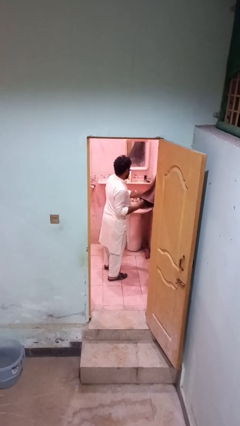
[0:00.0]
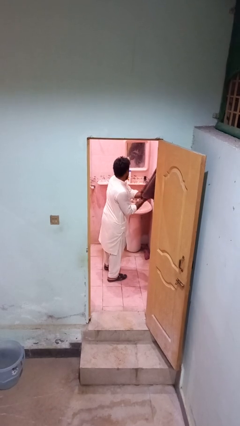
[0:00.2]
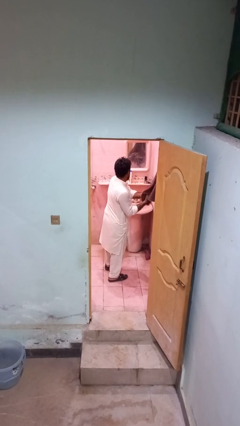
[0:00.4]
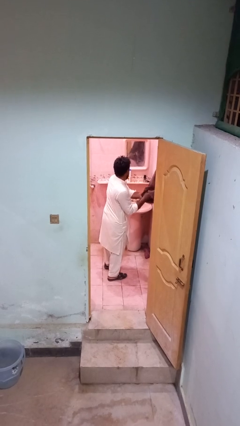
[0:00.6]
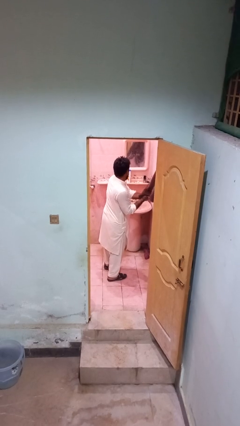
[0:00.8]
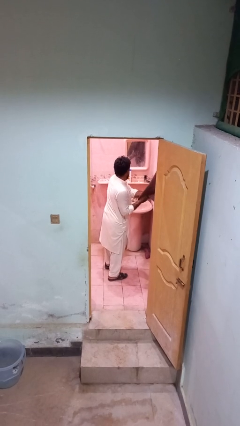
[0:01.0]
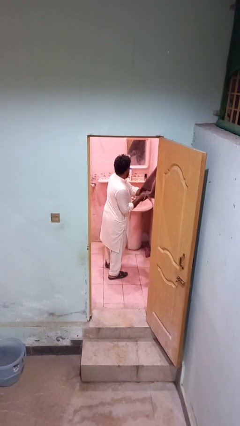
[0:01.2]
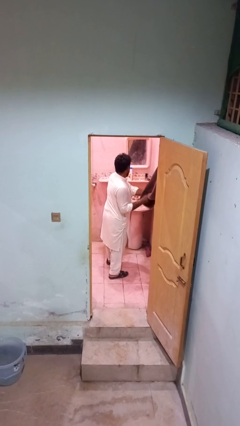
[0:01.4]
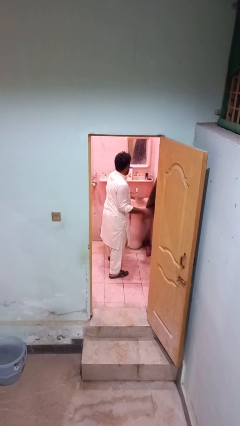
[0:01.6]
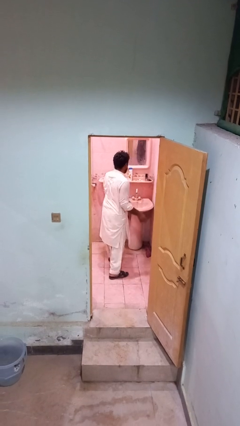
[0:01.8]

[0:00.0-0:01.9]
person dries hands with towel

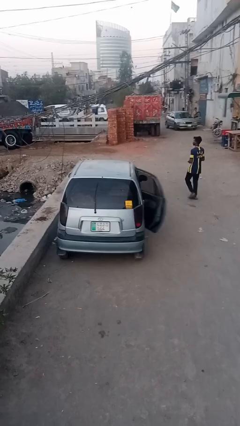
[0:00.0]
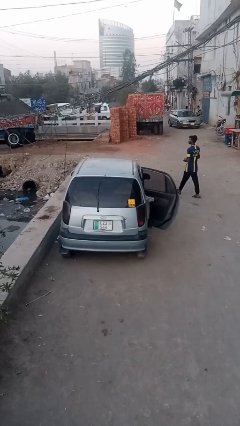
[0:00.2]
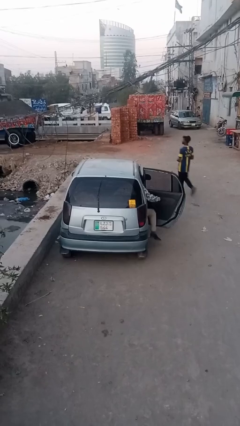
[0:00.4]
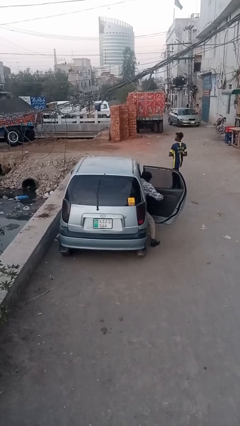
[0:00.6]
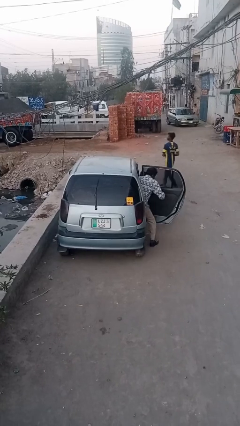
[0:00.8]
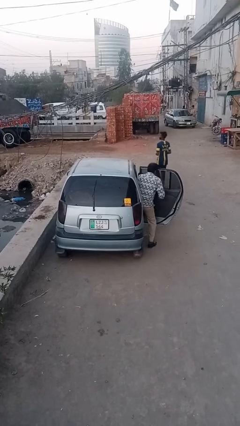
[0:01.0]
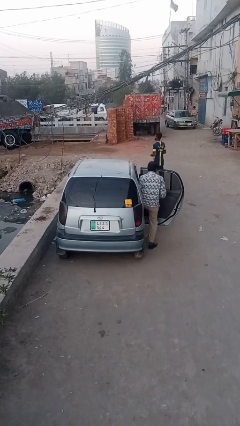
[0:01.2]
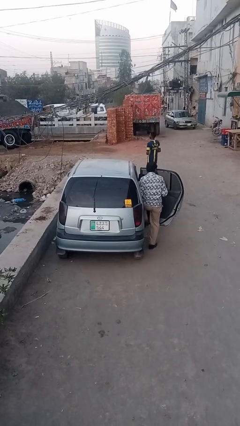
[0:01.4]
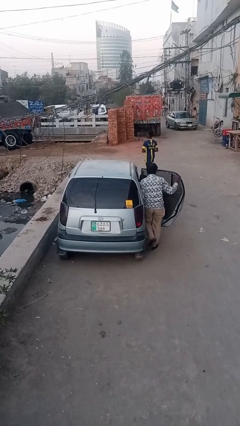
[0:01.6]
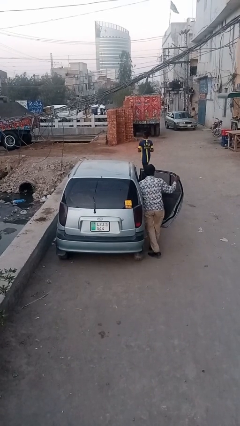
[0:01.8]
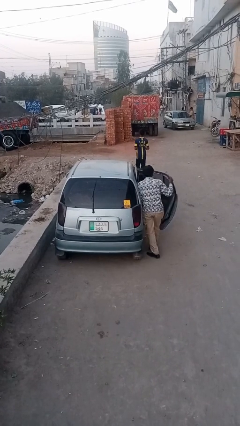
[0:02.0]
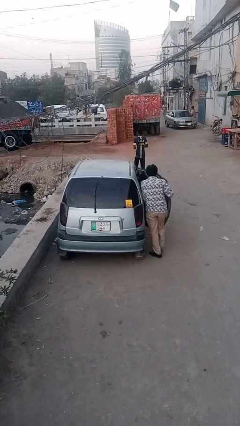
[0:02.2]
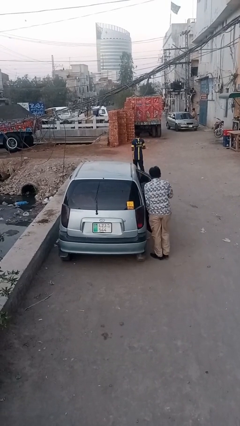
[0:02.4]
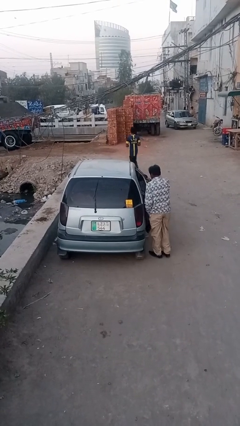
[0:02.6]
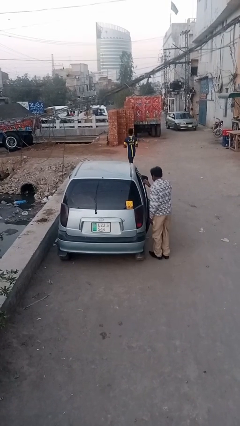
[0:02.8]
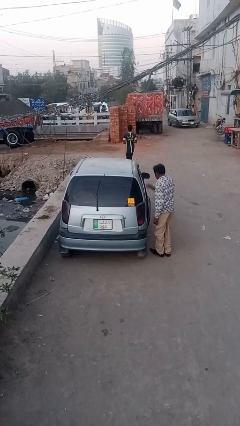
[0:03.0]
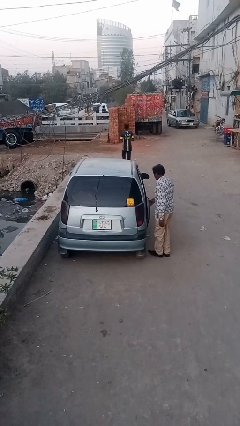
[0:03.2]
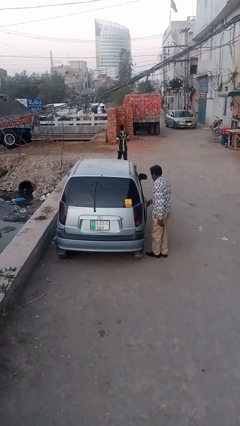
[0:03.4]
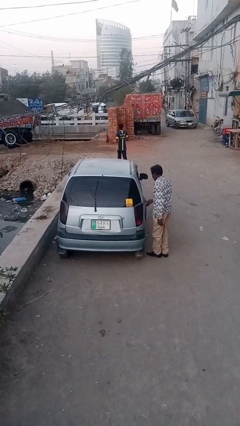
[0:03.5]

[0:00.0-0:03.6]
car drops off person

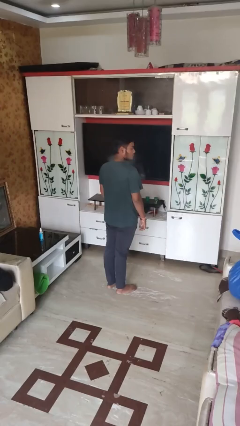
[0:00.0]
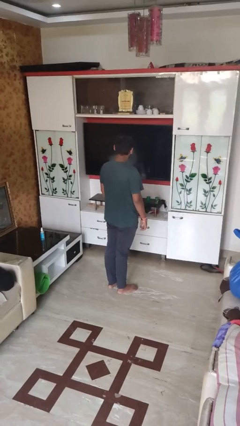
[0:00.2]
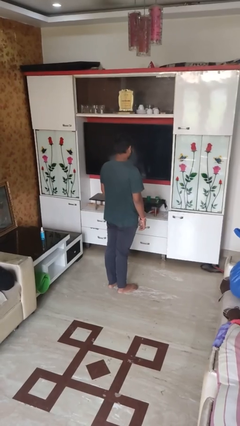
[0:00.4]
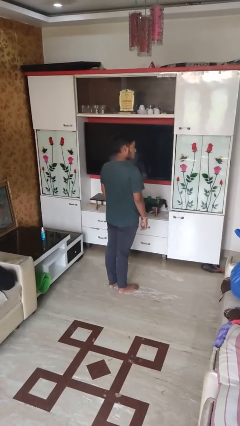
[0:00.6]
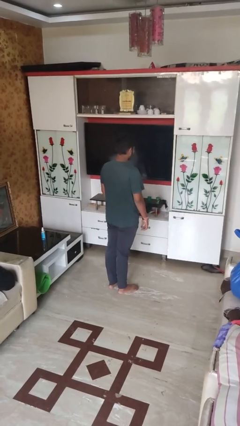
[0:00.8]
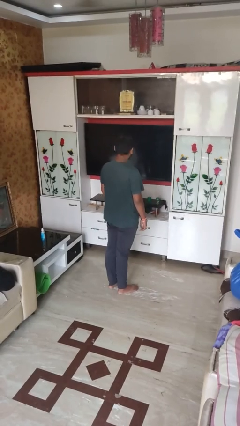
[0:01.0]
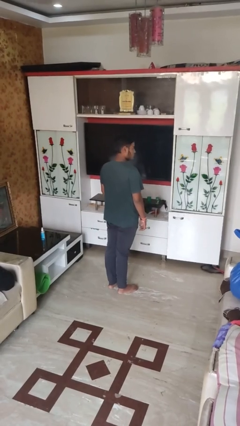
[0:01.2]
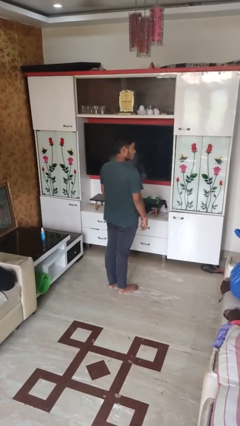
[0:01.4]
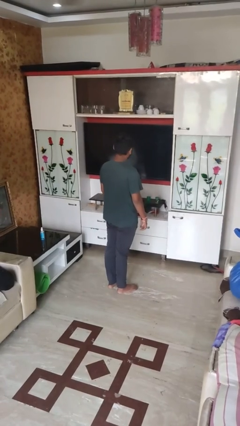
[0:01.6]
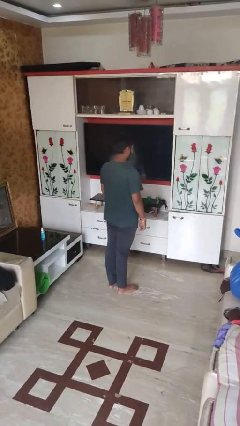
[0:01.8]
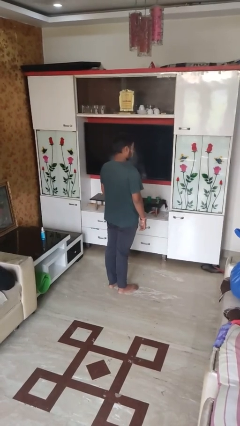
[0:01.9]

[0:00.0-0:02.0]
person shakes head

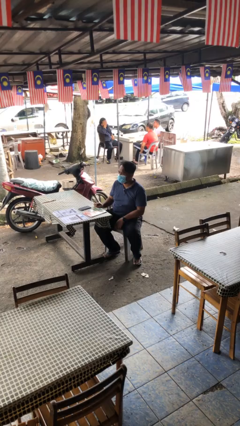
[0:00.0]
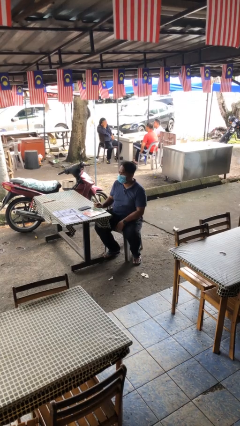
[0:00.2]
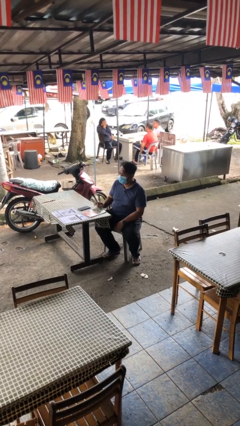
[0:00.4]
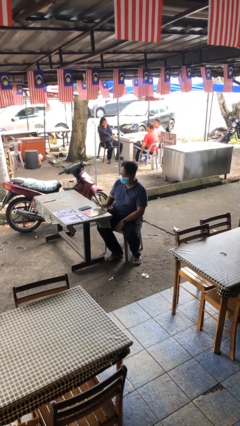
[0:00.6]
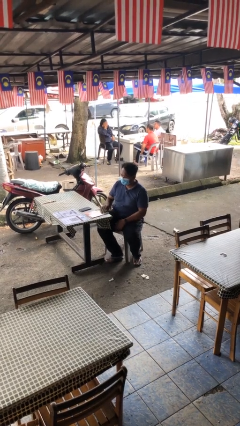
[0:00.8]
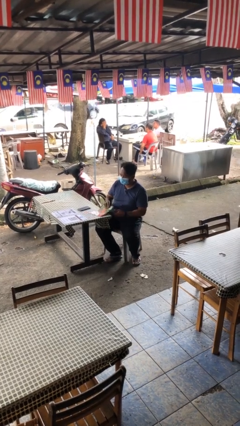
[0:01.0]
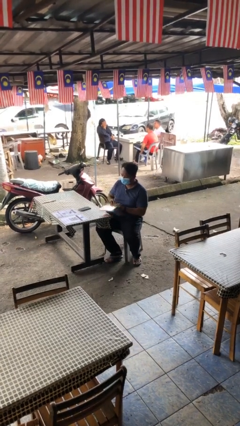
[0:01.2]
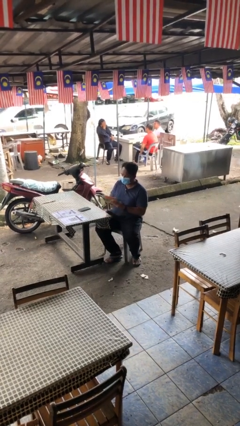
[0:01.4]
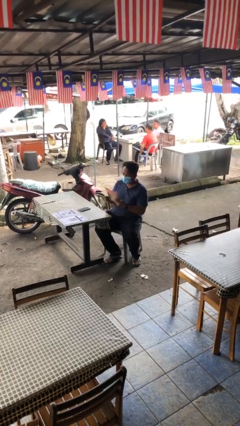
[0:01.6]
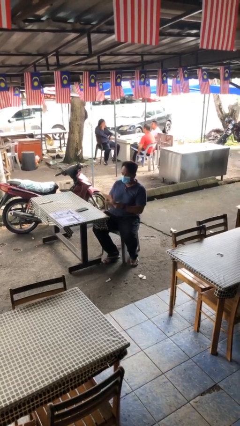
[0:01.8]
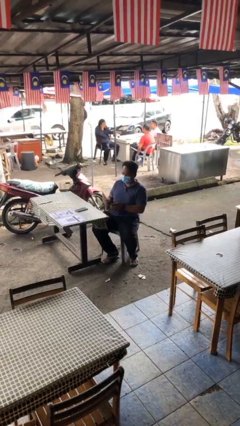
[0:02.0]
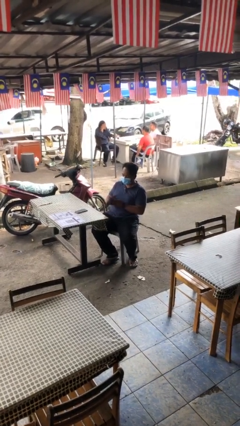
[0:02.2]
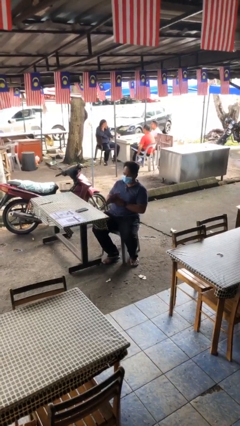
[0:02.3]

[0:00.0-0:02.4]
person picks up object from table

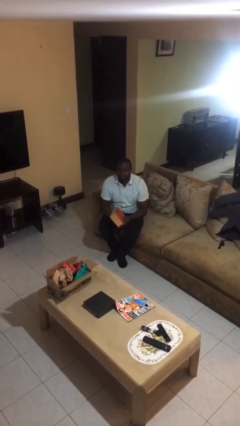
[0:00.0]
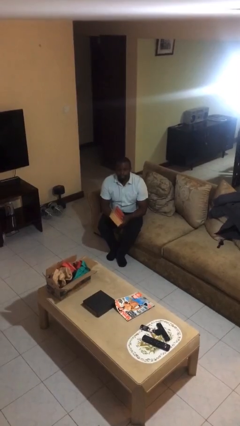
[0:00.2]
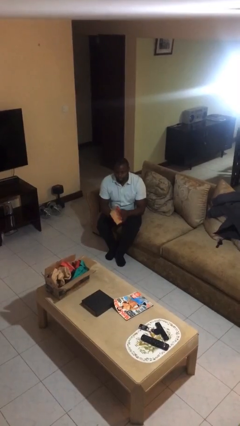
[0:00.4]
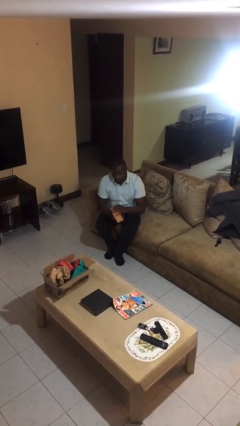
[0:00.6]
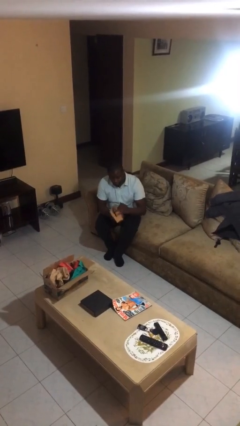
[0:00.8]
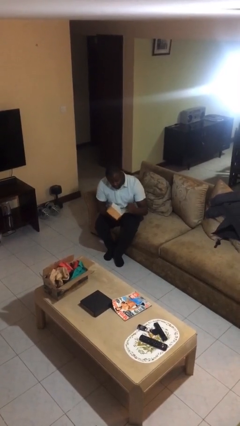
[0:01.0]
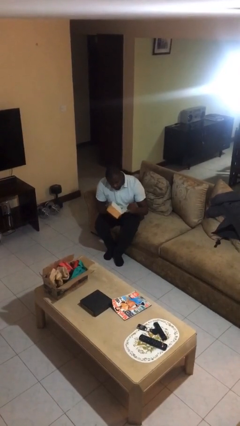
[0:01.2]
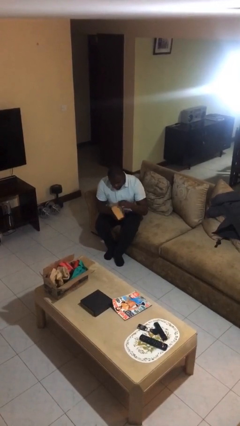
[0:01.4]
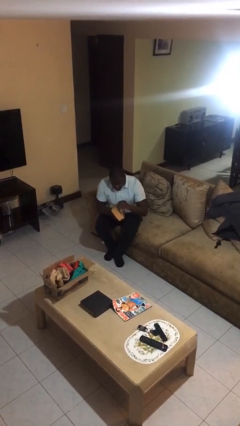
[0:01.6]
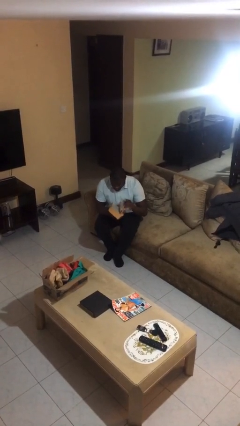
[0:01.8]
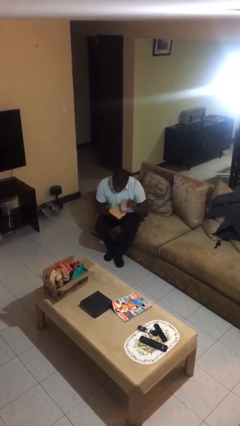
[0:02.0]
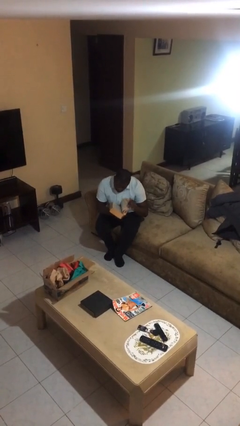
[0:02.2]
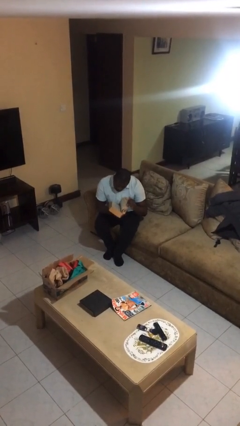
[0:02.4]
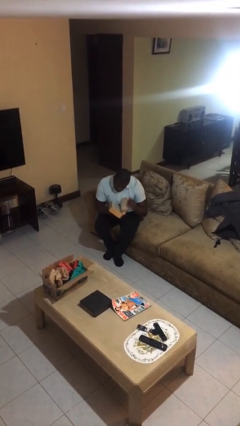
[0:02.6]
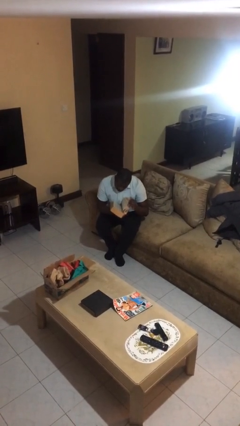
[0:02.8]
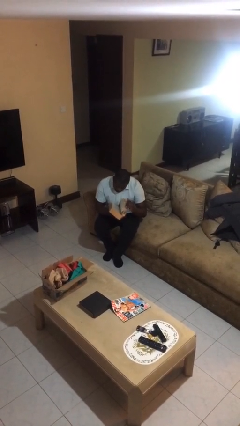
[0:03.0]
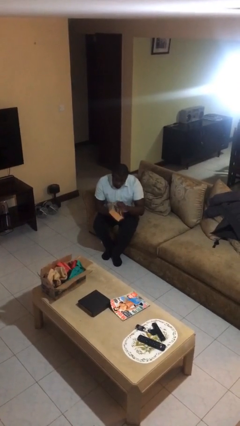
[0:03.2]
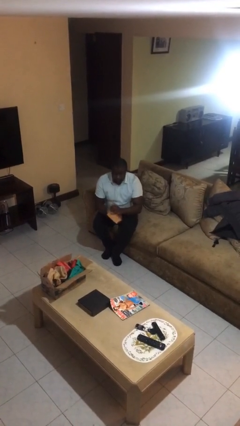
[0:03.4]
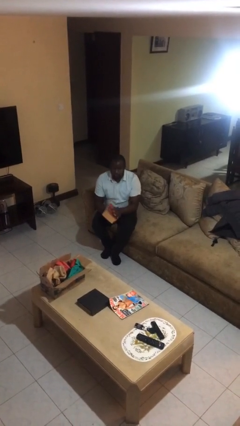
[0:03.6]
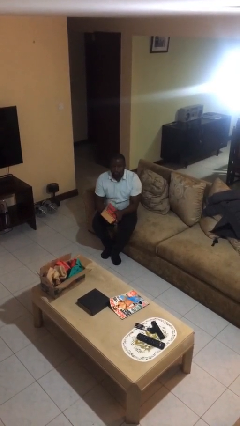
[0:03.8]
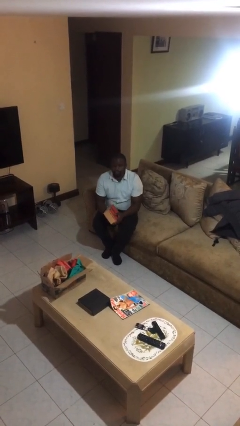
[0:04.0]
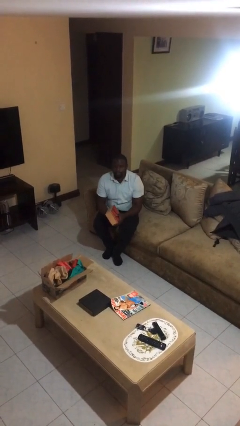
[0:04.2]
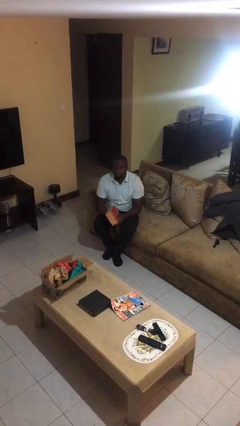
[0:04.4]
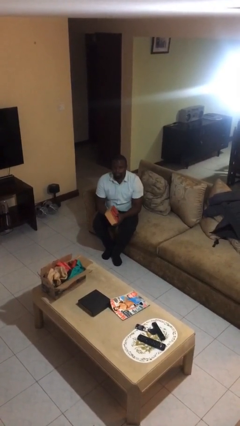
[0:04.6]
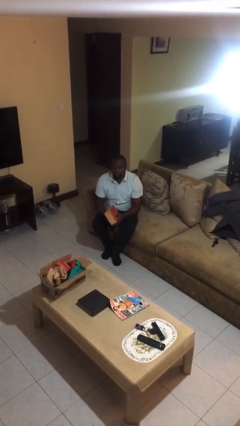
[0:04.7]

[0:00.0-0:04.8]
person reads book

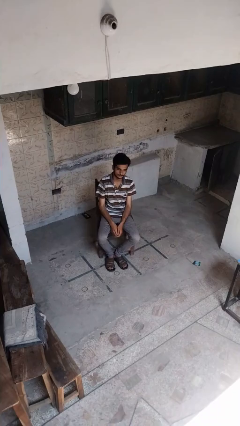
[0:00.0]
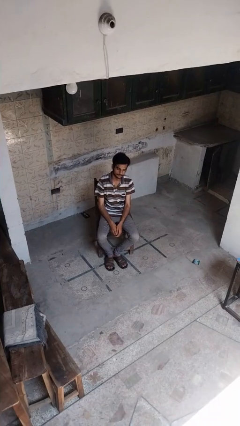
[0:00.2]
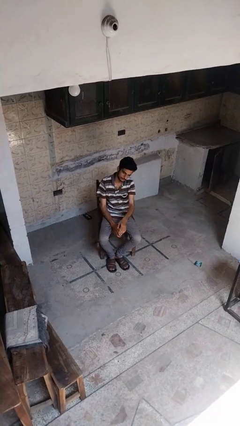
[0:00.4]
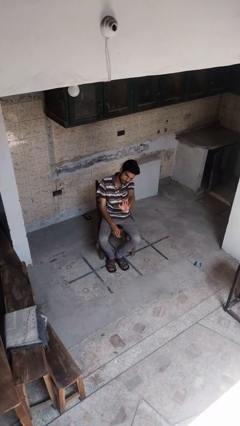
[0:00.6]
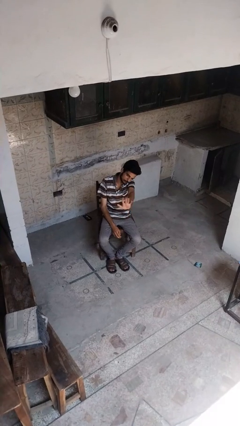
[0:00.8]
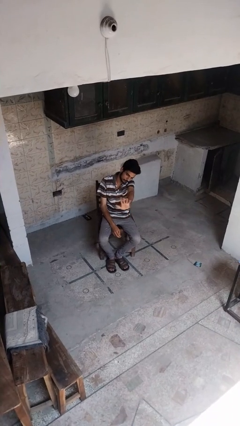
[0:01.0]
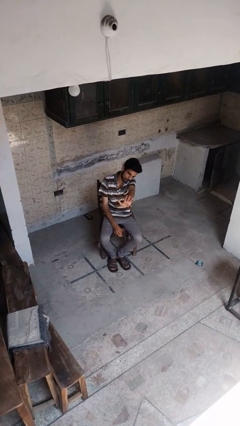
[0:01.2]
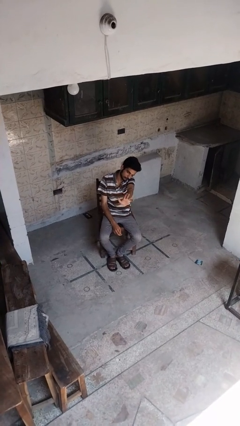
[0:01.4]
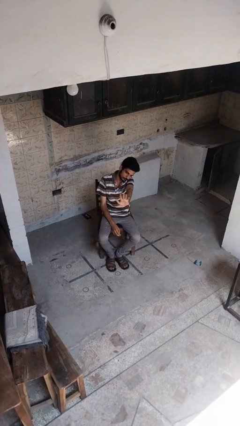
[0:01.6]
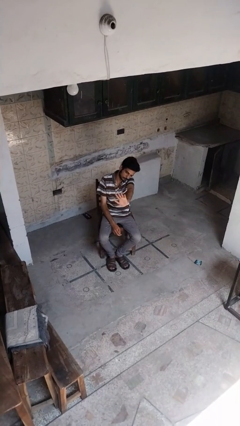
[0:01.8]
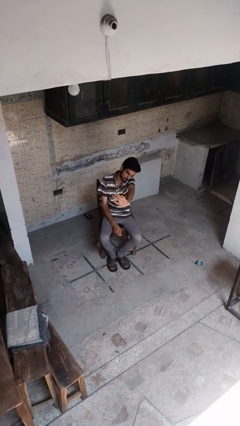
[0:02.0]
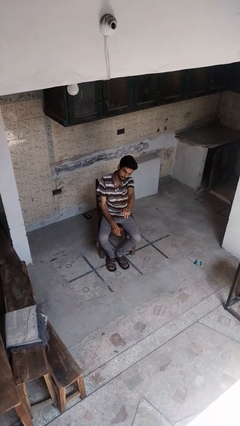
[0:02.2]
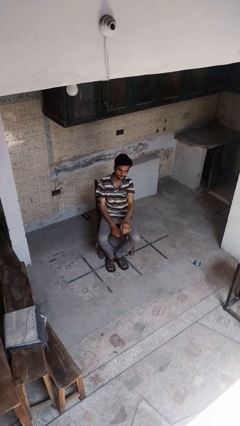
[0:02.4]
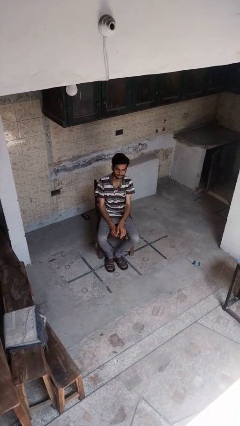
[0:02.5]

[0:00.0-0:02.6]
person waves at person

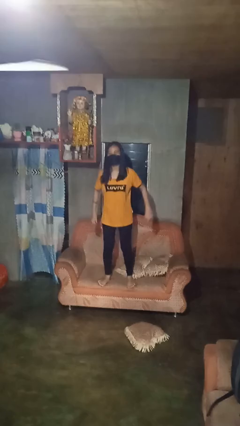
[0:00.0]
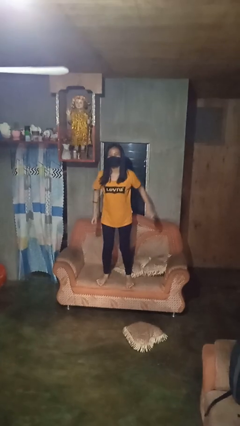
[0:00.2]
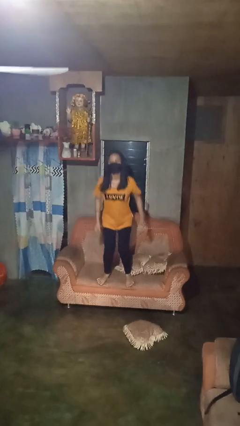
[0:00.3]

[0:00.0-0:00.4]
person jumps on couch
